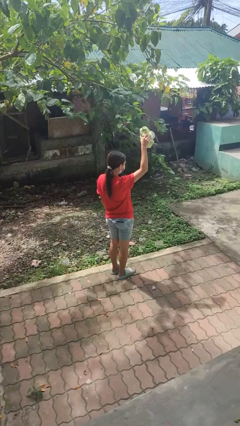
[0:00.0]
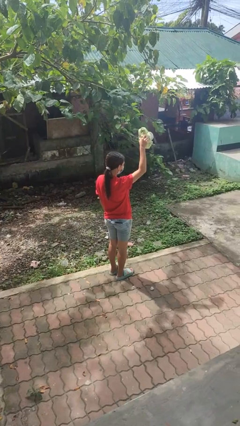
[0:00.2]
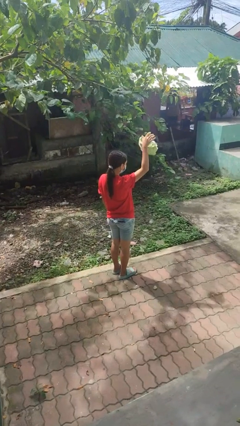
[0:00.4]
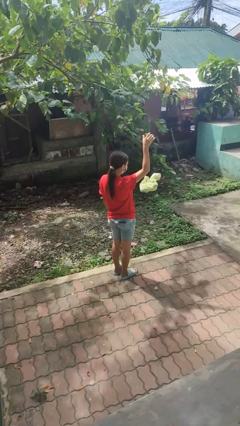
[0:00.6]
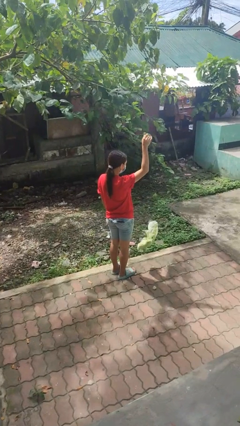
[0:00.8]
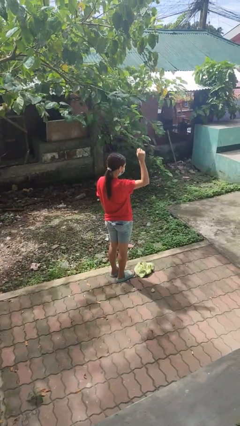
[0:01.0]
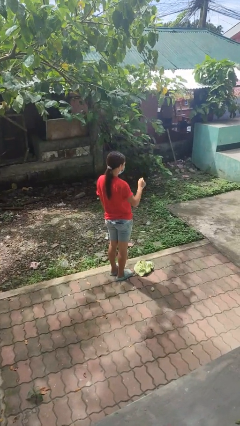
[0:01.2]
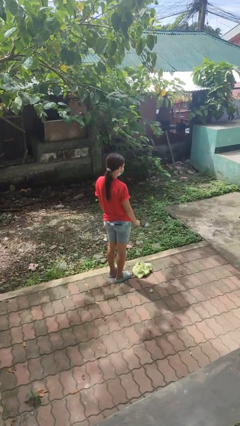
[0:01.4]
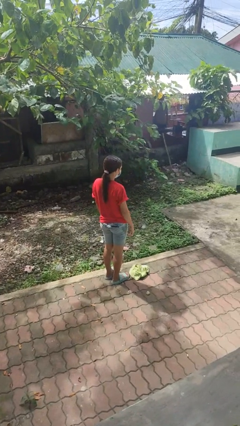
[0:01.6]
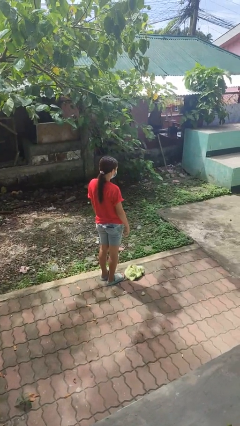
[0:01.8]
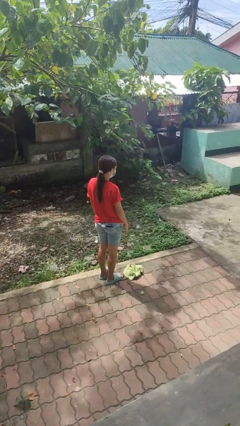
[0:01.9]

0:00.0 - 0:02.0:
person drops object

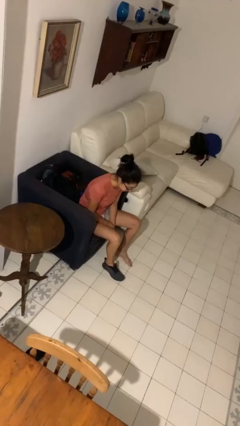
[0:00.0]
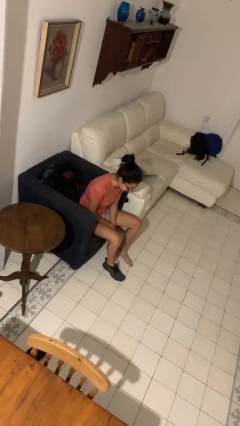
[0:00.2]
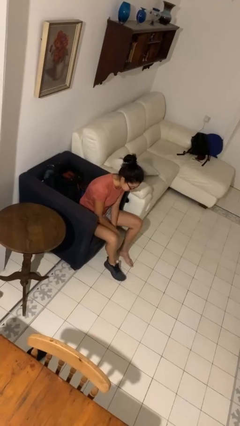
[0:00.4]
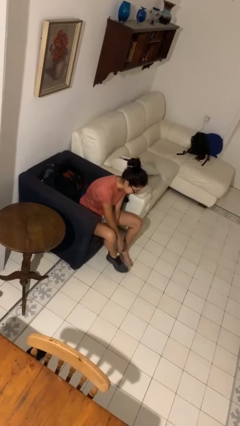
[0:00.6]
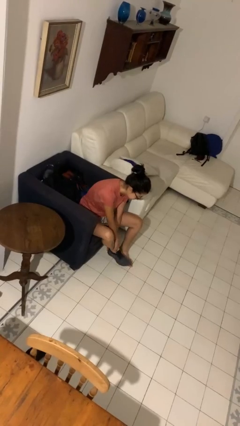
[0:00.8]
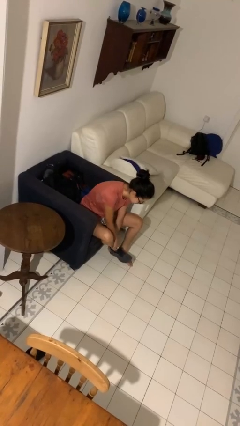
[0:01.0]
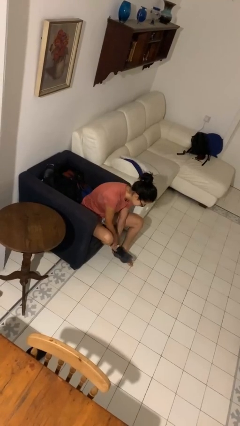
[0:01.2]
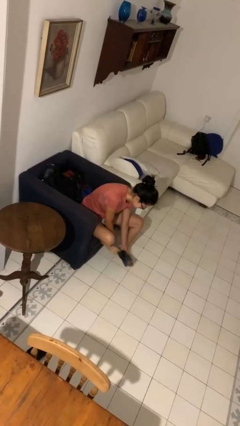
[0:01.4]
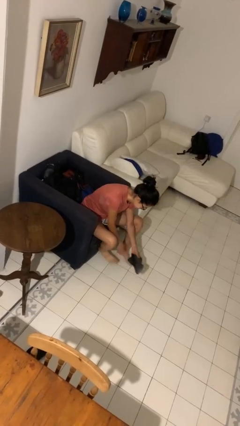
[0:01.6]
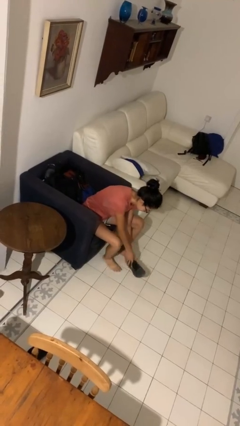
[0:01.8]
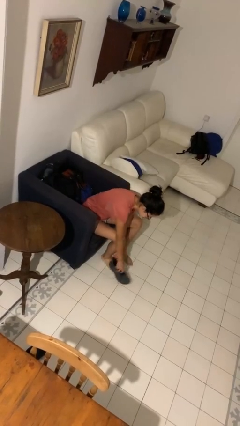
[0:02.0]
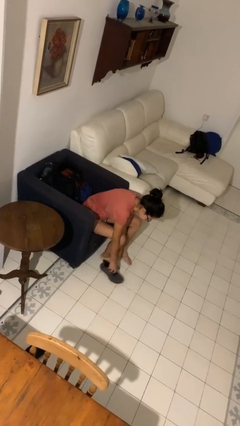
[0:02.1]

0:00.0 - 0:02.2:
person takes off shoes

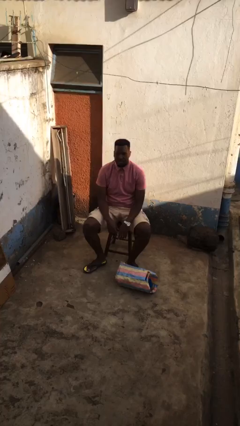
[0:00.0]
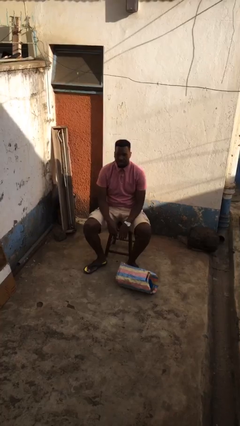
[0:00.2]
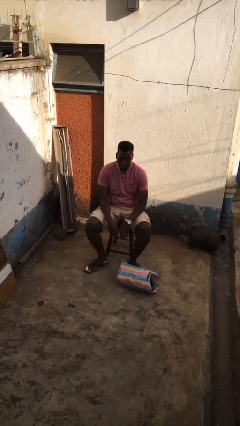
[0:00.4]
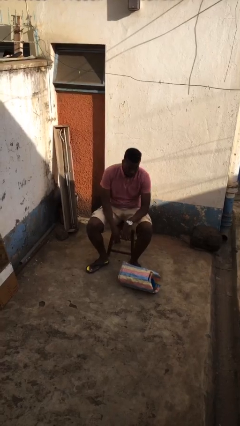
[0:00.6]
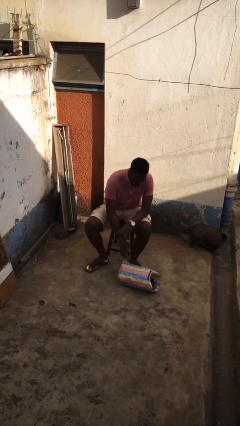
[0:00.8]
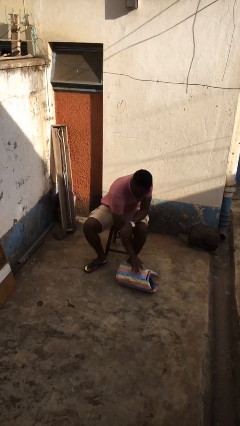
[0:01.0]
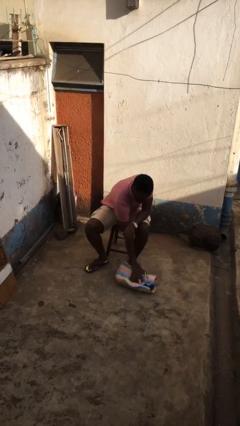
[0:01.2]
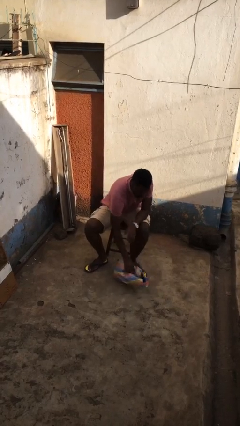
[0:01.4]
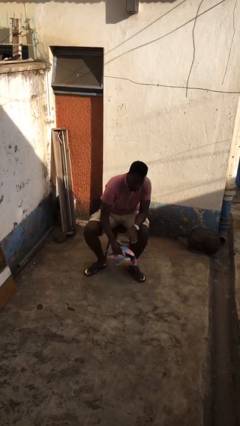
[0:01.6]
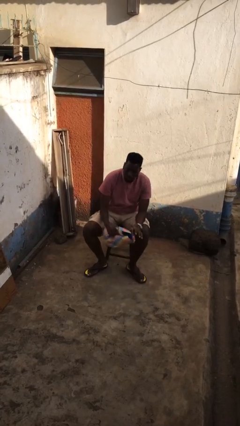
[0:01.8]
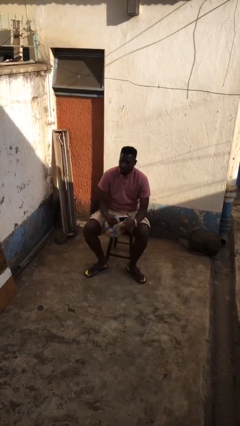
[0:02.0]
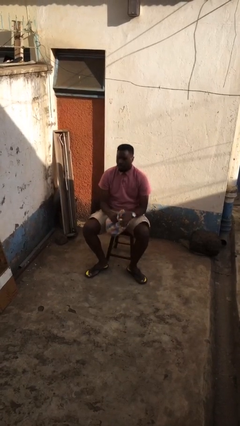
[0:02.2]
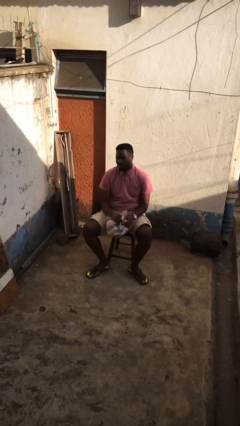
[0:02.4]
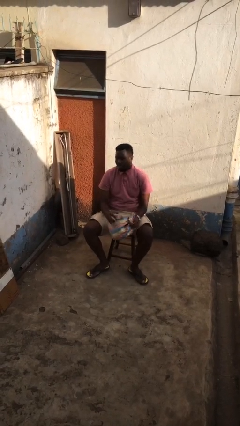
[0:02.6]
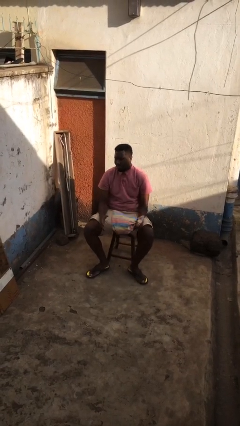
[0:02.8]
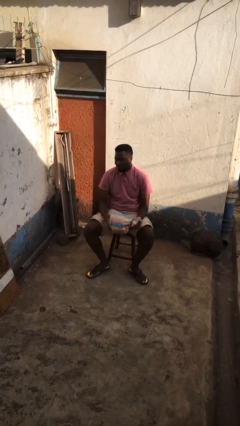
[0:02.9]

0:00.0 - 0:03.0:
person picks up object from floor

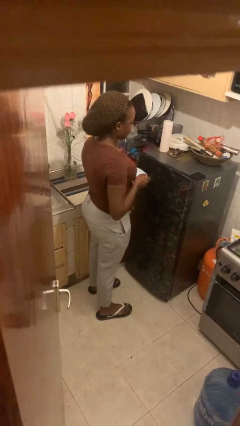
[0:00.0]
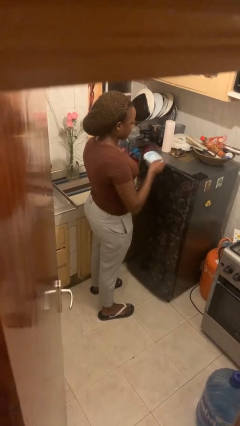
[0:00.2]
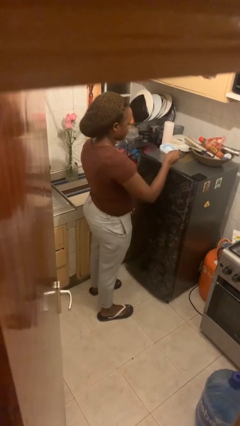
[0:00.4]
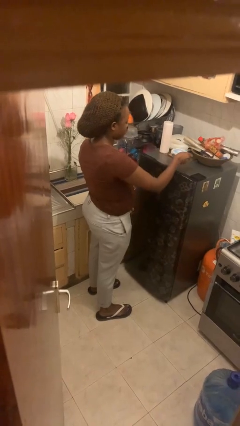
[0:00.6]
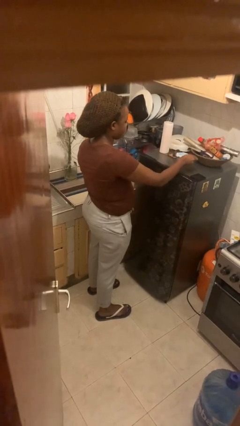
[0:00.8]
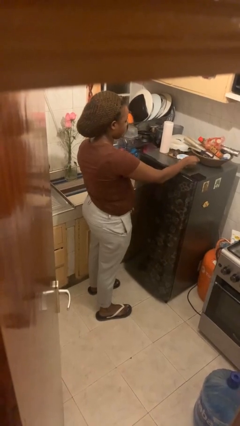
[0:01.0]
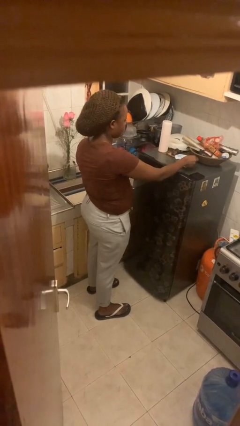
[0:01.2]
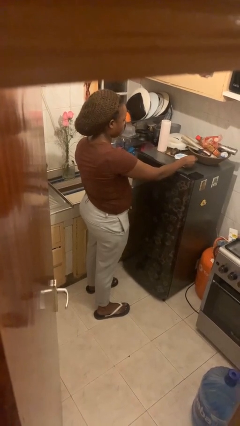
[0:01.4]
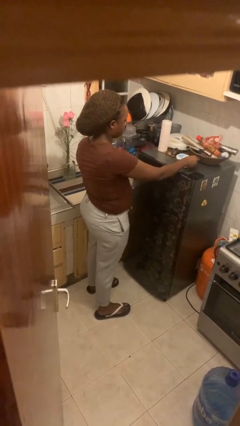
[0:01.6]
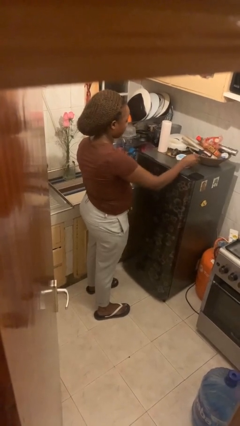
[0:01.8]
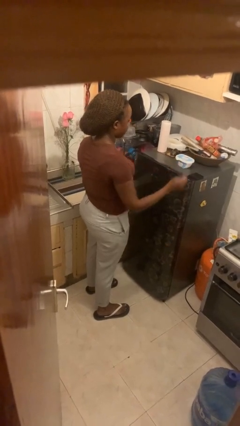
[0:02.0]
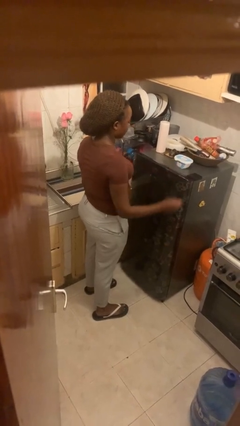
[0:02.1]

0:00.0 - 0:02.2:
person puts down object on countertop

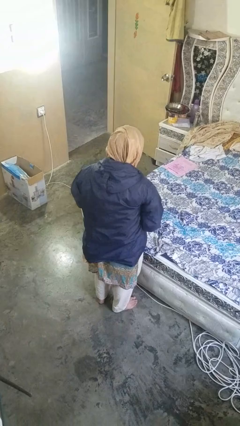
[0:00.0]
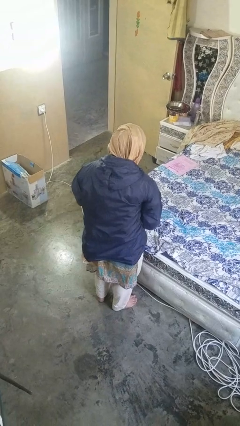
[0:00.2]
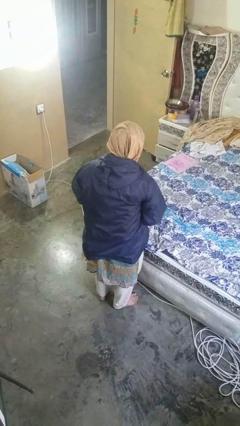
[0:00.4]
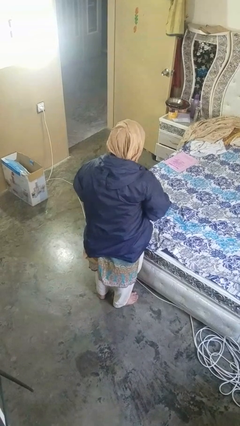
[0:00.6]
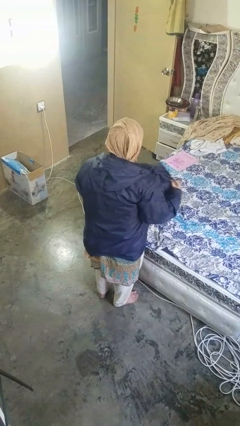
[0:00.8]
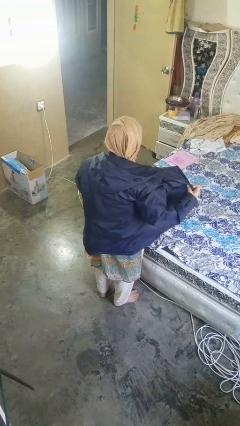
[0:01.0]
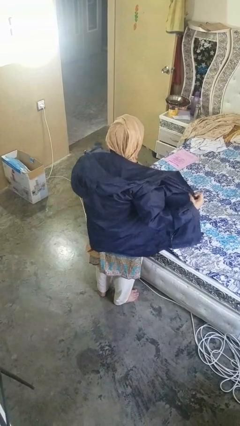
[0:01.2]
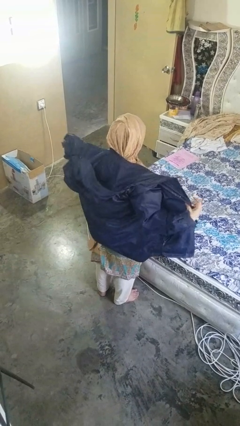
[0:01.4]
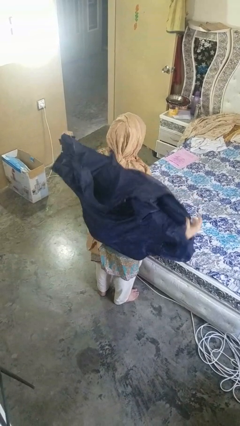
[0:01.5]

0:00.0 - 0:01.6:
person unzips jacket

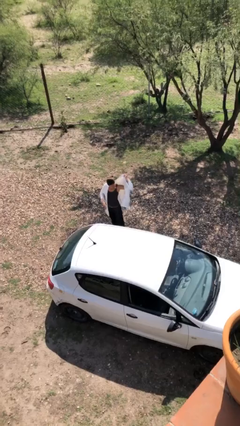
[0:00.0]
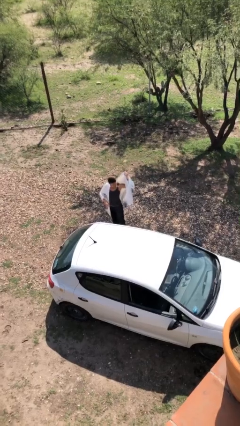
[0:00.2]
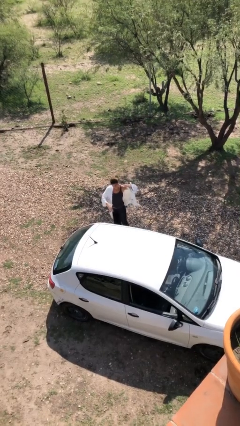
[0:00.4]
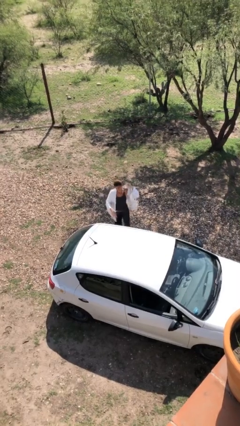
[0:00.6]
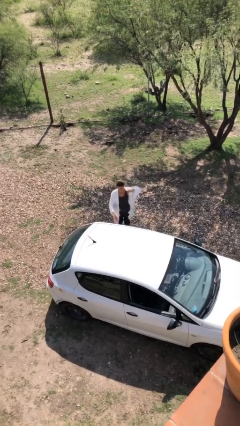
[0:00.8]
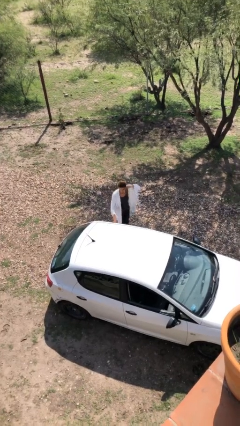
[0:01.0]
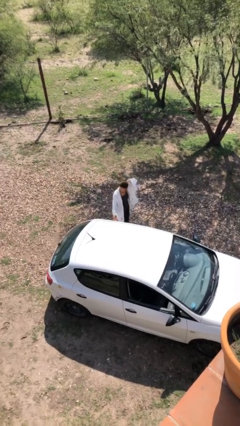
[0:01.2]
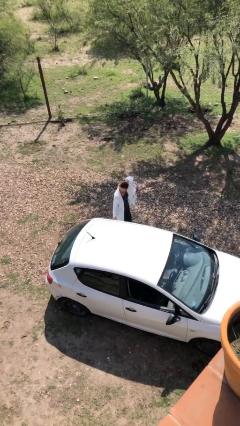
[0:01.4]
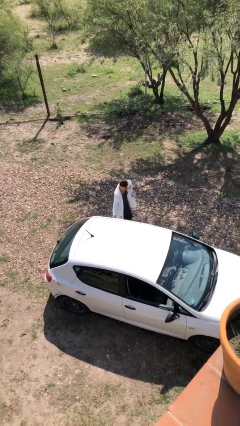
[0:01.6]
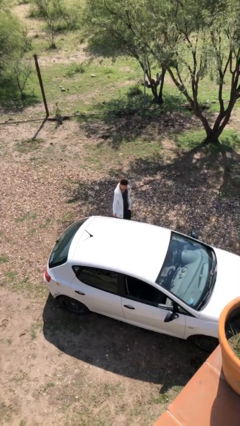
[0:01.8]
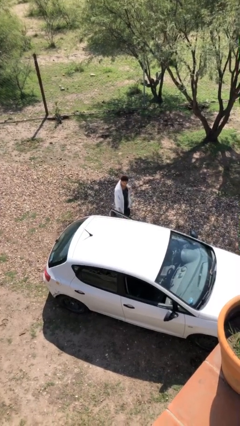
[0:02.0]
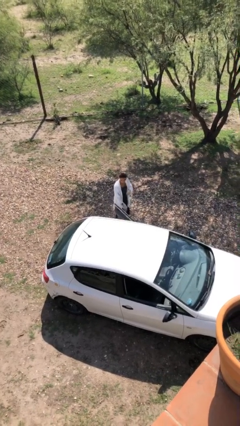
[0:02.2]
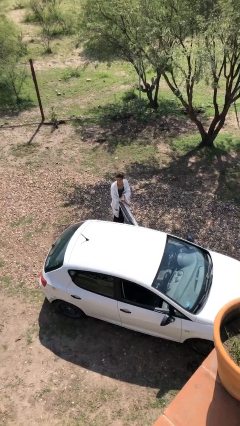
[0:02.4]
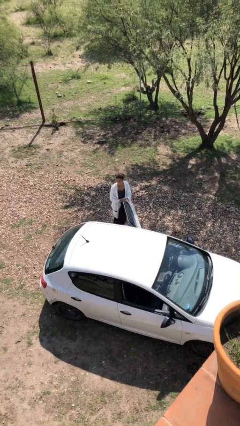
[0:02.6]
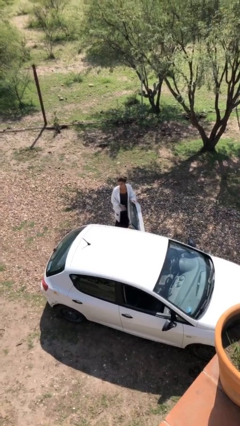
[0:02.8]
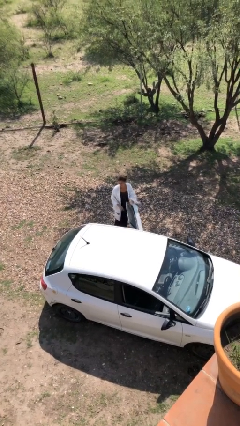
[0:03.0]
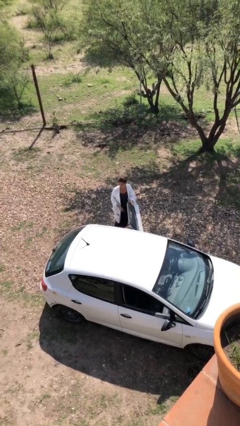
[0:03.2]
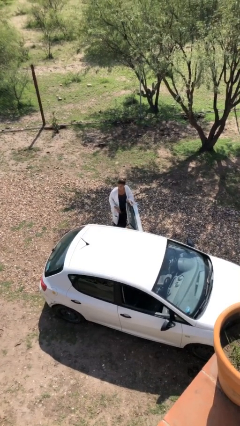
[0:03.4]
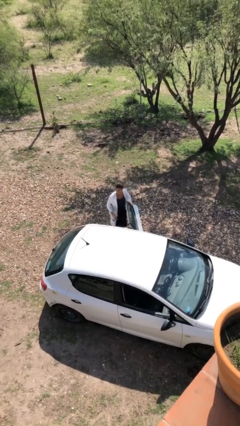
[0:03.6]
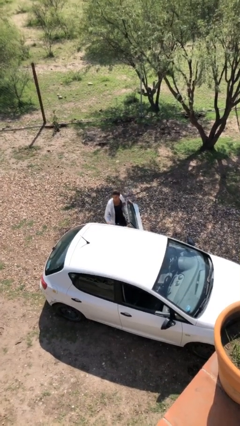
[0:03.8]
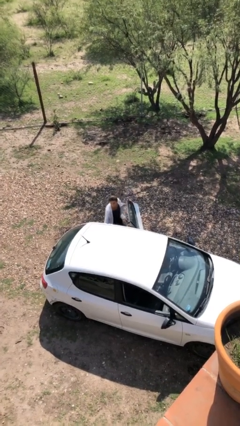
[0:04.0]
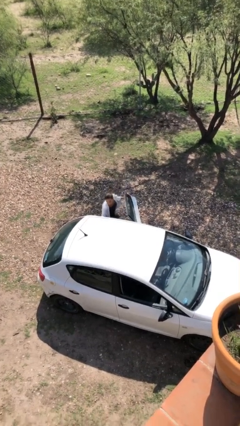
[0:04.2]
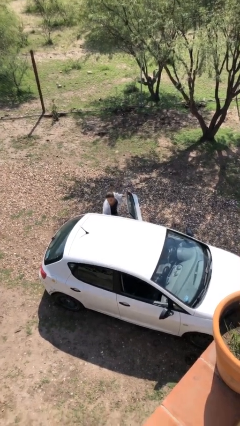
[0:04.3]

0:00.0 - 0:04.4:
person opens car door

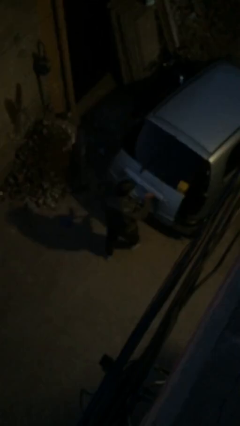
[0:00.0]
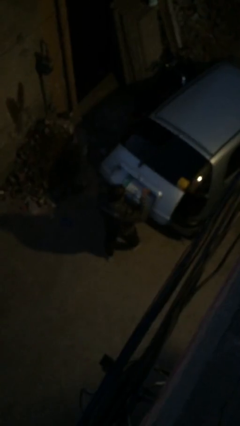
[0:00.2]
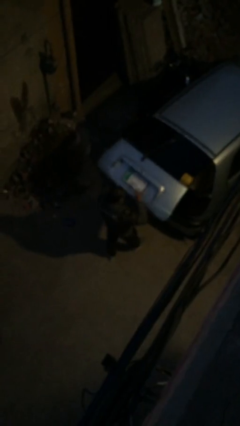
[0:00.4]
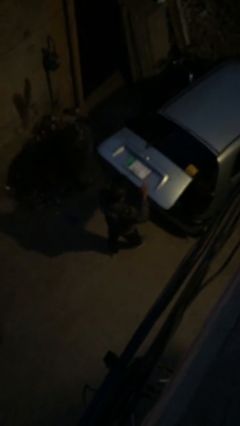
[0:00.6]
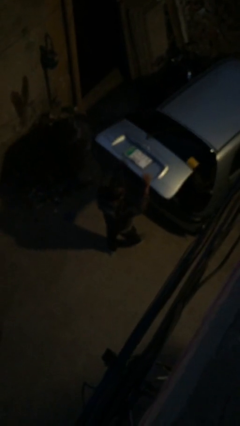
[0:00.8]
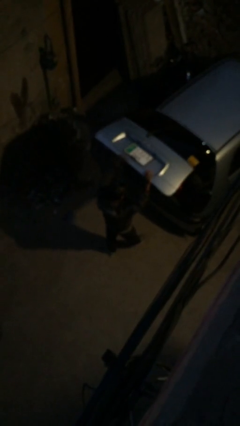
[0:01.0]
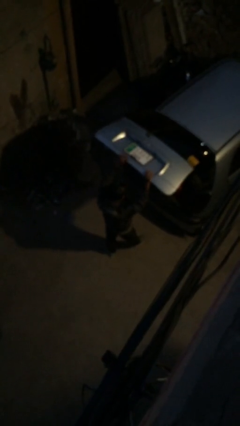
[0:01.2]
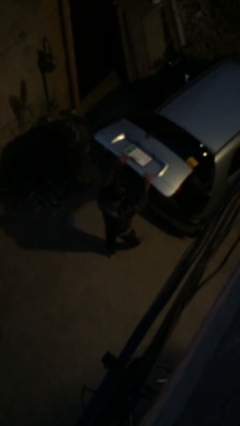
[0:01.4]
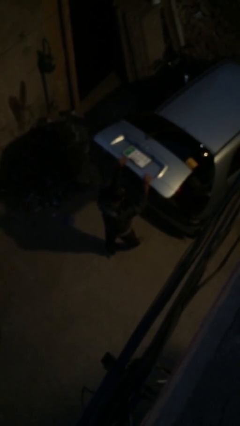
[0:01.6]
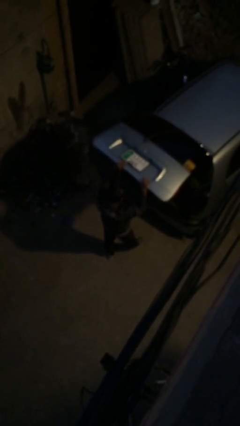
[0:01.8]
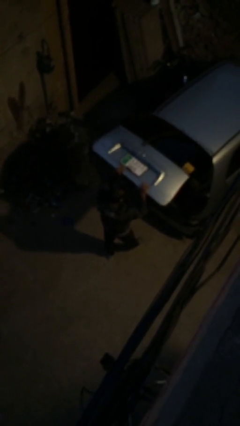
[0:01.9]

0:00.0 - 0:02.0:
person opens car trunk
